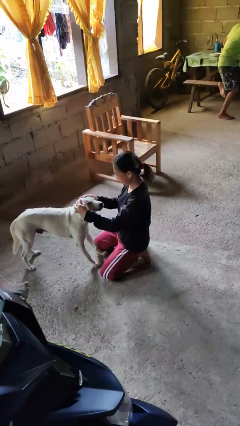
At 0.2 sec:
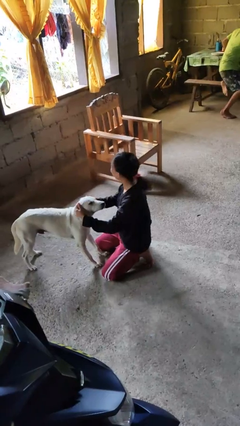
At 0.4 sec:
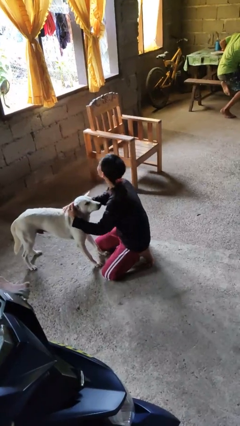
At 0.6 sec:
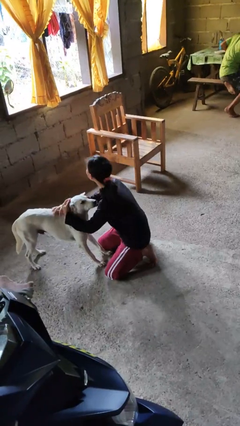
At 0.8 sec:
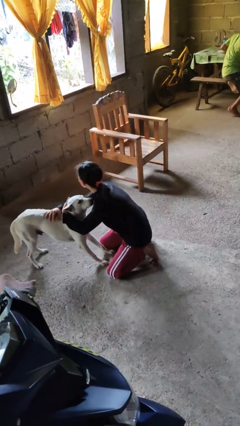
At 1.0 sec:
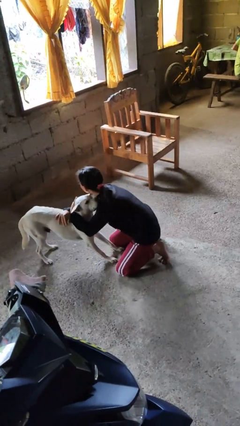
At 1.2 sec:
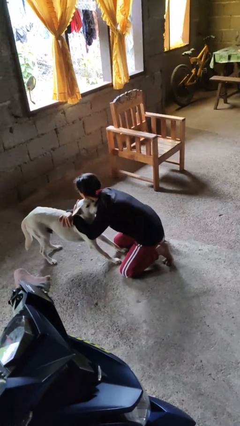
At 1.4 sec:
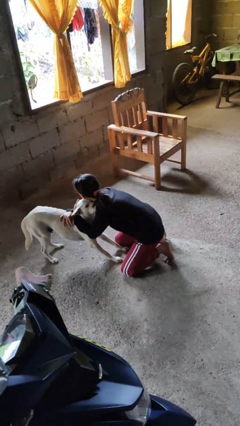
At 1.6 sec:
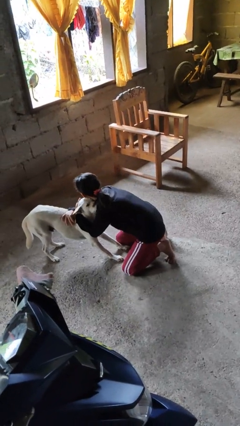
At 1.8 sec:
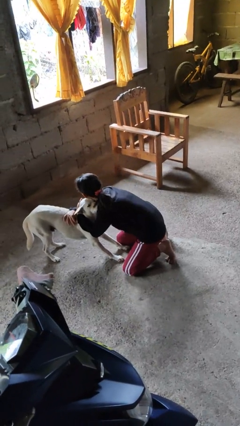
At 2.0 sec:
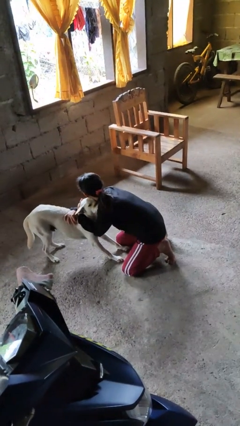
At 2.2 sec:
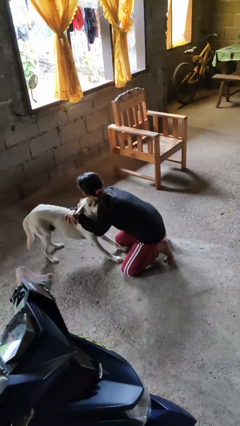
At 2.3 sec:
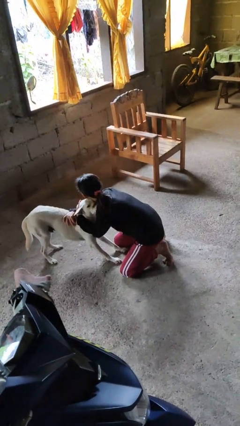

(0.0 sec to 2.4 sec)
person hugs dog

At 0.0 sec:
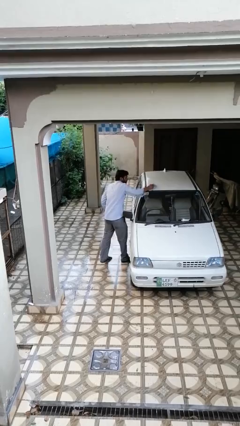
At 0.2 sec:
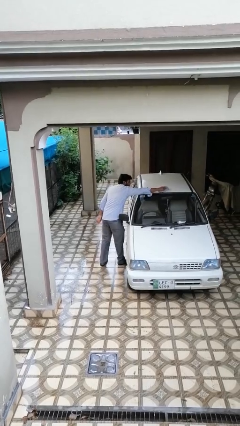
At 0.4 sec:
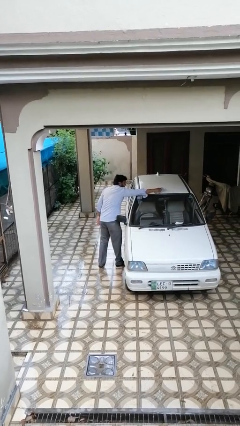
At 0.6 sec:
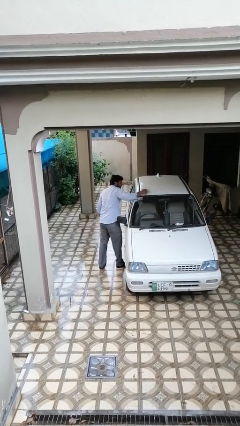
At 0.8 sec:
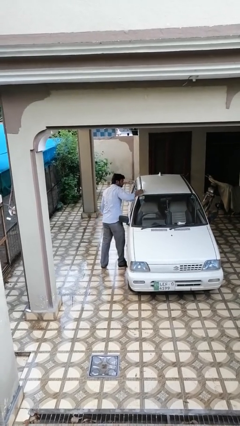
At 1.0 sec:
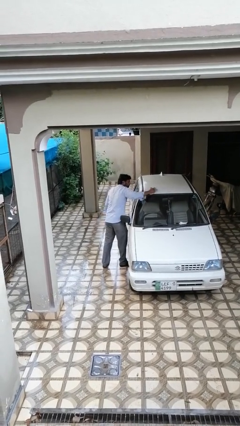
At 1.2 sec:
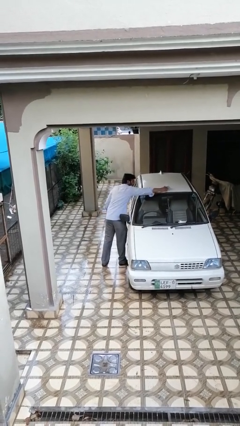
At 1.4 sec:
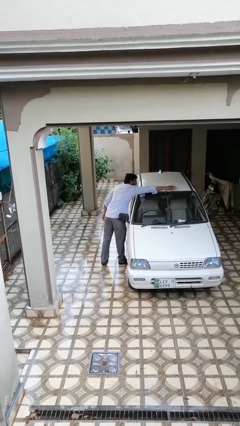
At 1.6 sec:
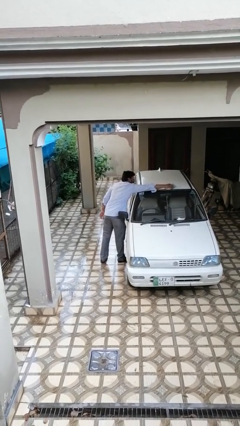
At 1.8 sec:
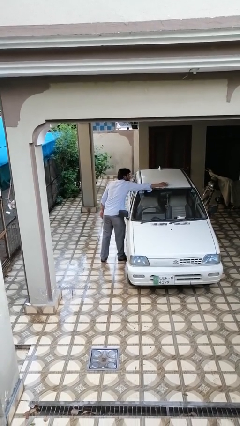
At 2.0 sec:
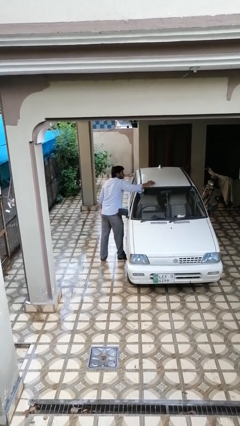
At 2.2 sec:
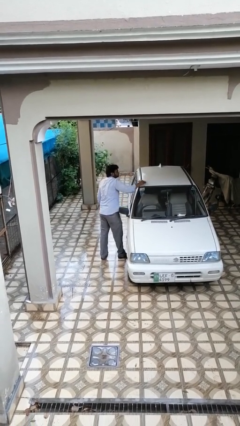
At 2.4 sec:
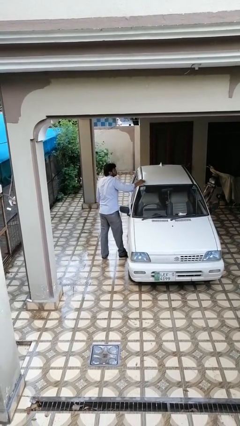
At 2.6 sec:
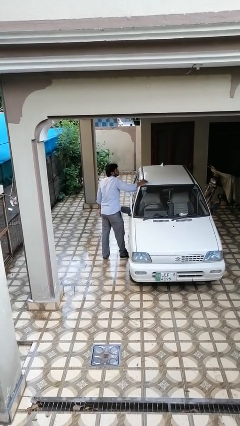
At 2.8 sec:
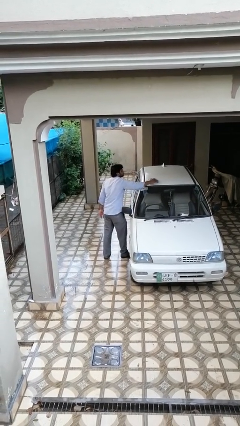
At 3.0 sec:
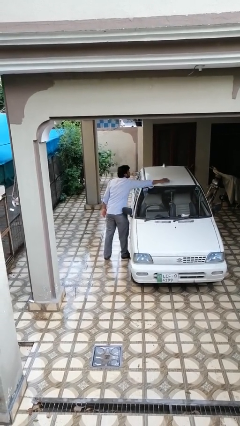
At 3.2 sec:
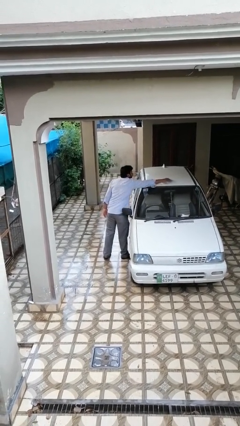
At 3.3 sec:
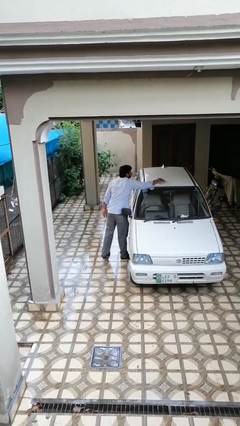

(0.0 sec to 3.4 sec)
person polishes car with rag

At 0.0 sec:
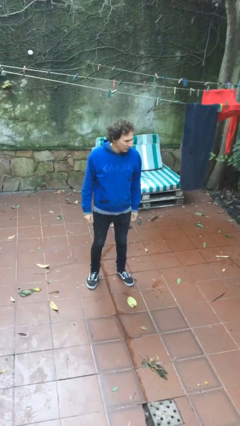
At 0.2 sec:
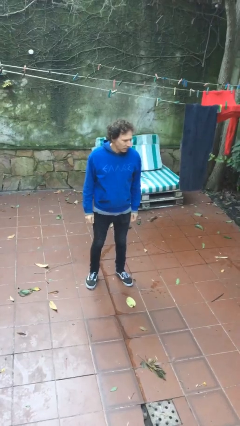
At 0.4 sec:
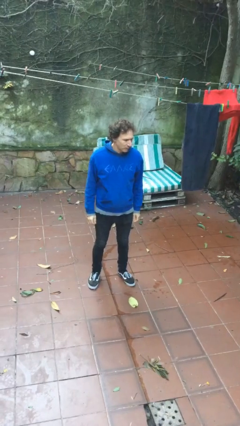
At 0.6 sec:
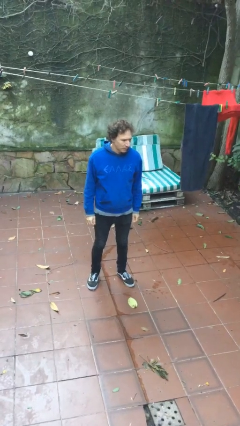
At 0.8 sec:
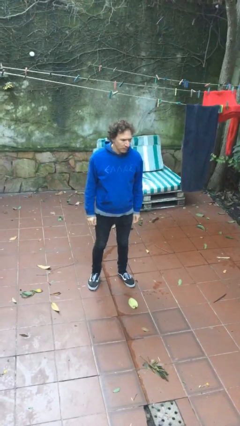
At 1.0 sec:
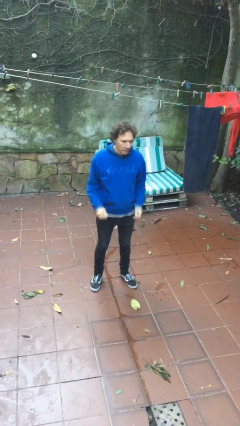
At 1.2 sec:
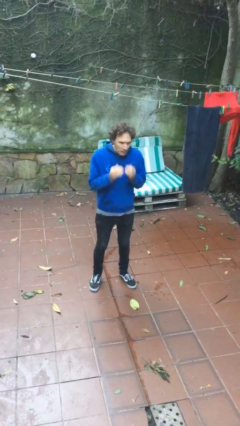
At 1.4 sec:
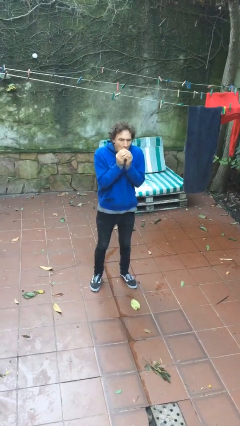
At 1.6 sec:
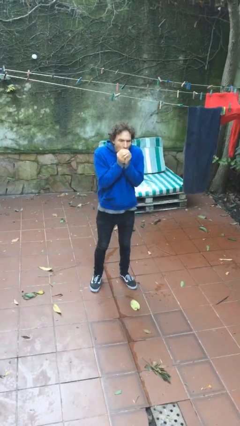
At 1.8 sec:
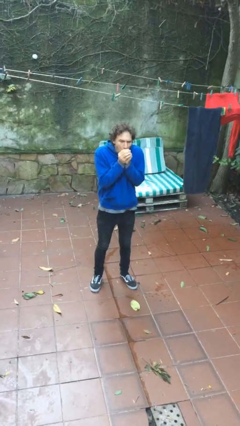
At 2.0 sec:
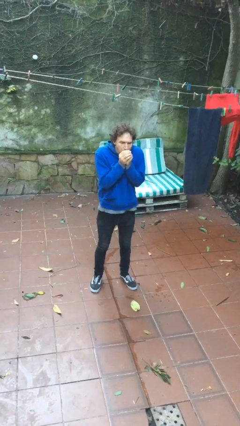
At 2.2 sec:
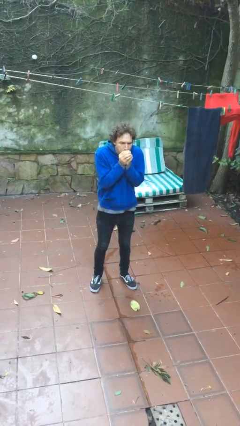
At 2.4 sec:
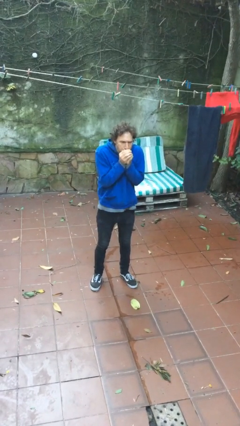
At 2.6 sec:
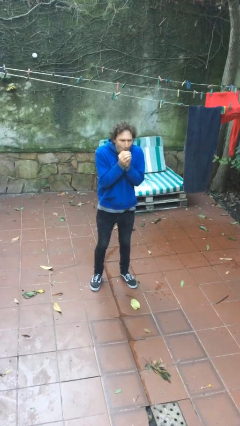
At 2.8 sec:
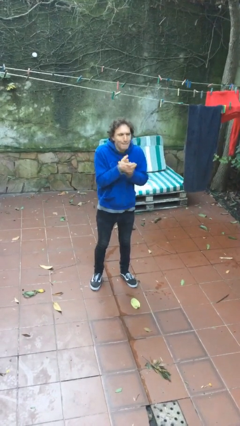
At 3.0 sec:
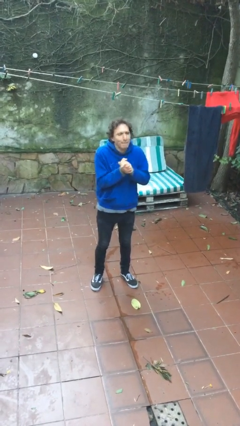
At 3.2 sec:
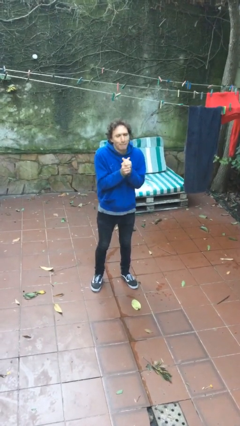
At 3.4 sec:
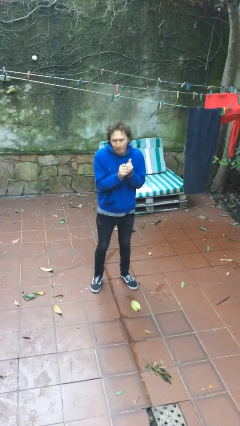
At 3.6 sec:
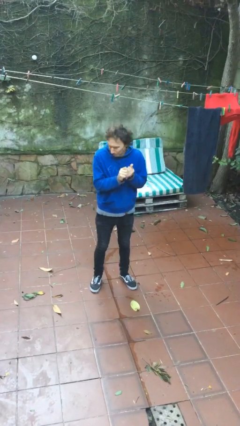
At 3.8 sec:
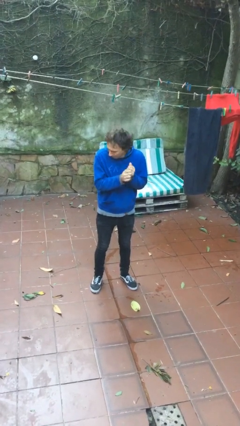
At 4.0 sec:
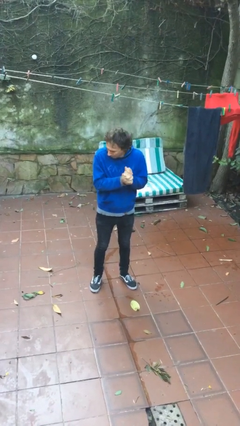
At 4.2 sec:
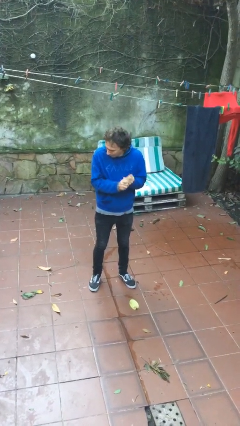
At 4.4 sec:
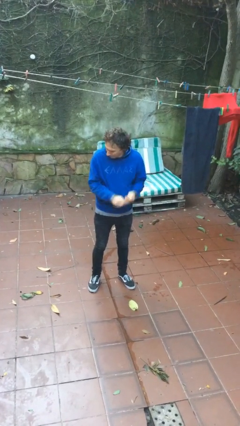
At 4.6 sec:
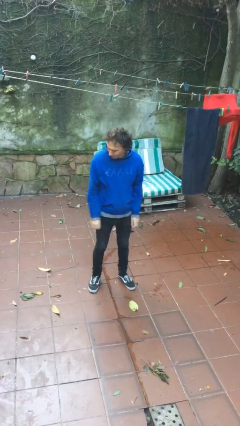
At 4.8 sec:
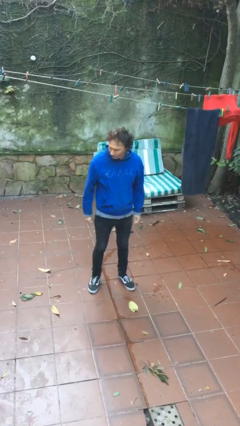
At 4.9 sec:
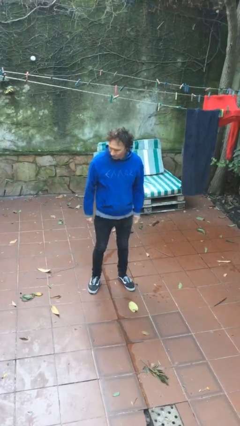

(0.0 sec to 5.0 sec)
person blows into hands

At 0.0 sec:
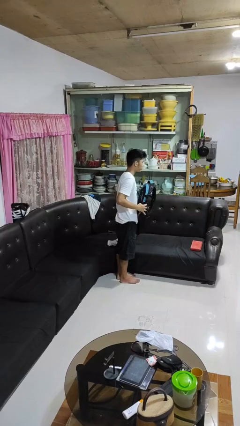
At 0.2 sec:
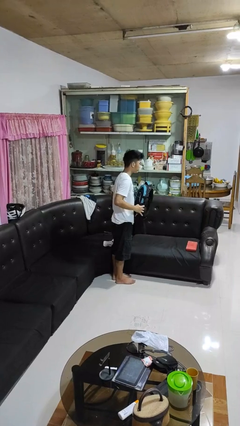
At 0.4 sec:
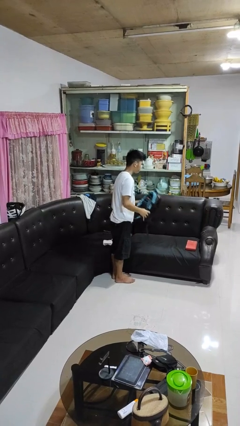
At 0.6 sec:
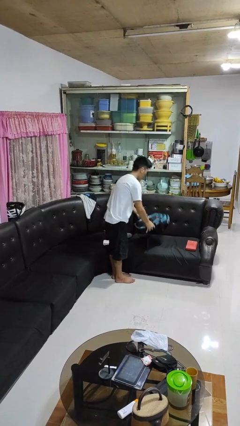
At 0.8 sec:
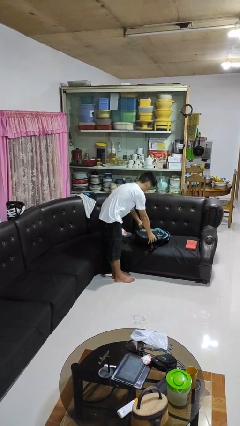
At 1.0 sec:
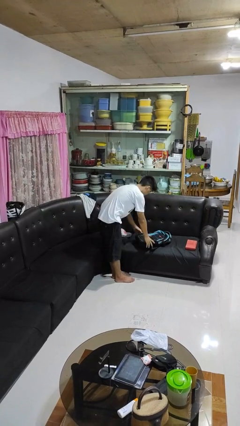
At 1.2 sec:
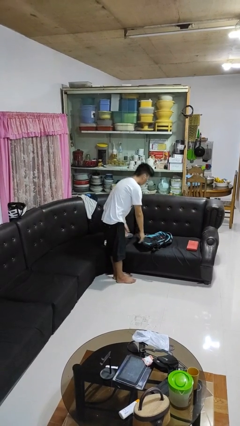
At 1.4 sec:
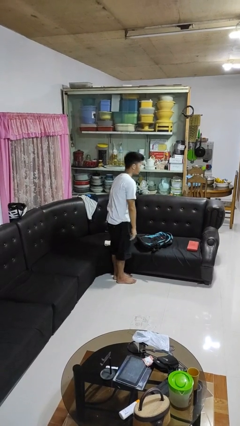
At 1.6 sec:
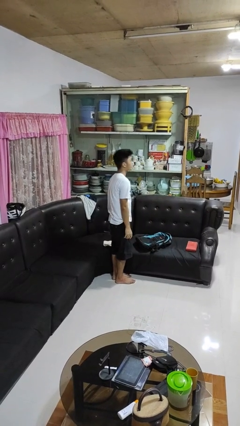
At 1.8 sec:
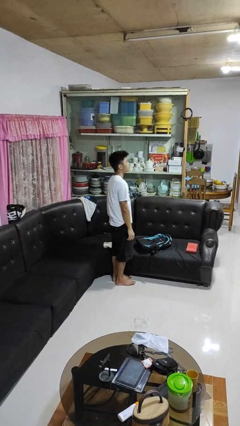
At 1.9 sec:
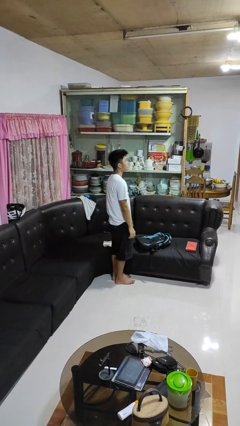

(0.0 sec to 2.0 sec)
person picks up object from couch

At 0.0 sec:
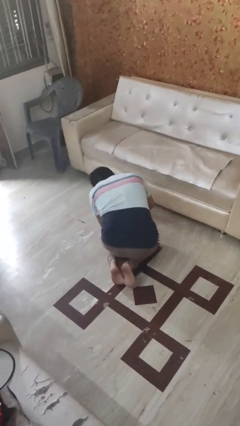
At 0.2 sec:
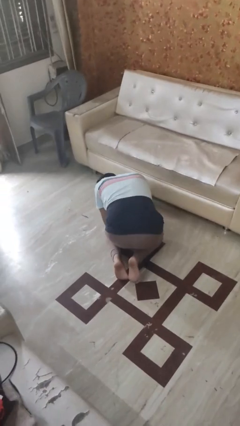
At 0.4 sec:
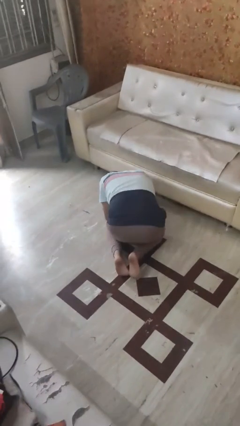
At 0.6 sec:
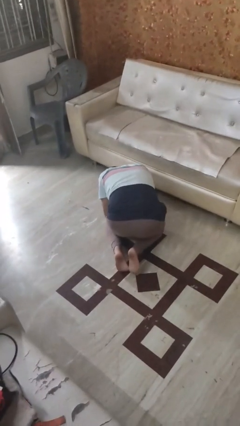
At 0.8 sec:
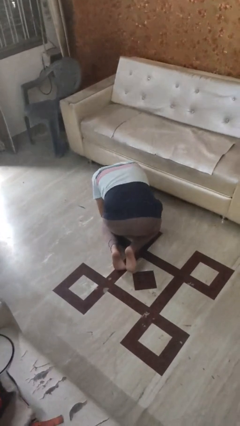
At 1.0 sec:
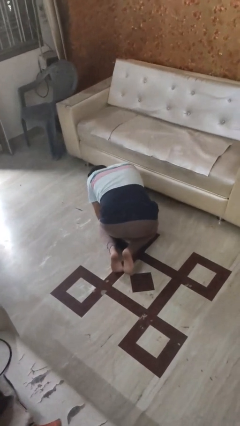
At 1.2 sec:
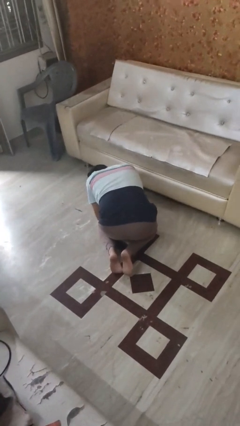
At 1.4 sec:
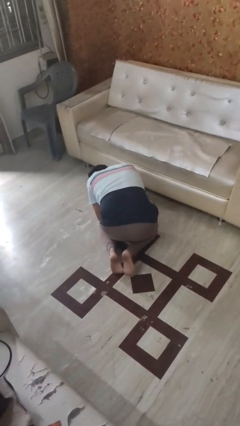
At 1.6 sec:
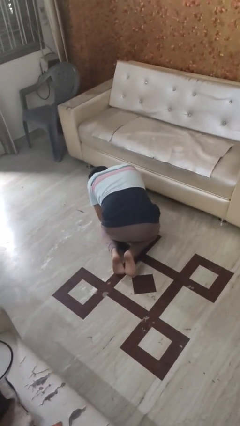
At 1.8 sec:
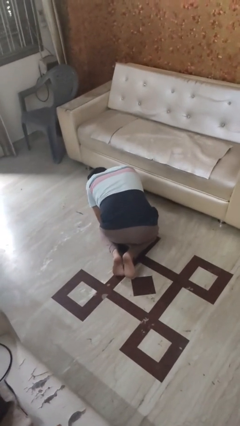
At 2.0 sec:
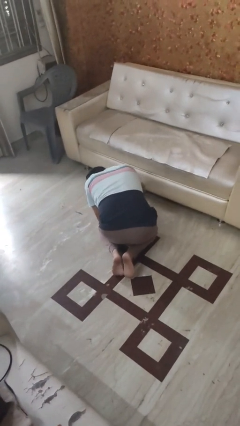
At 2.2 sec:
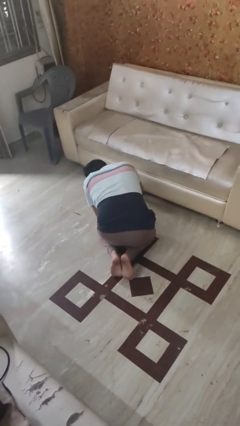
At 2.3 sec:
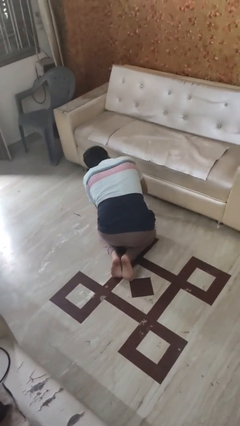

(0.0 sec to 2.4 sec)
person searches under bed

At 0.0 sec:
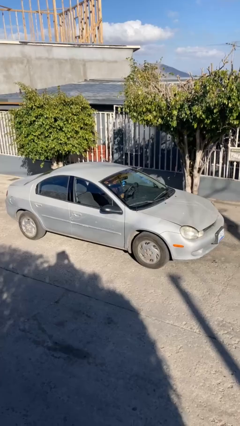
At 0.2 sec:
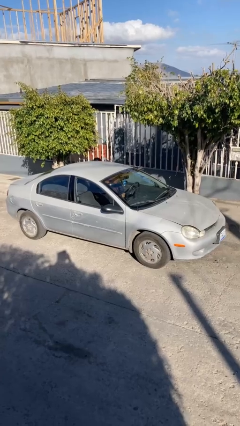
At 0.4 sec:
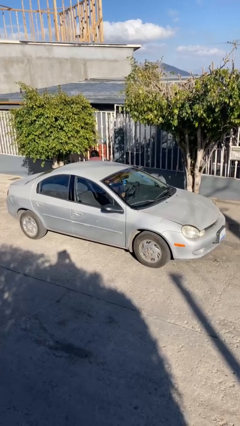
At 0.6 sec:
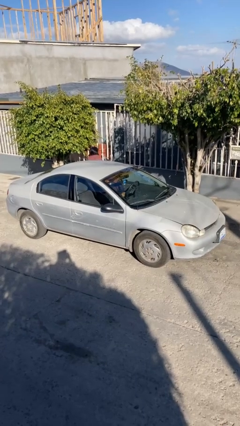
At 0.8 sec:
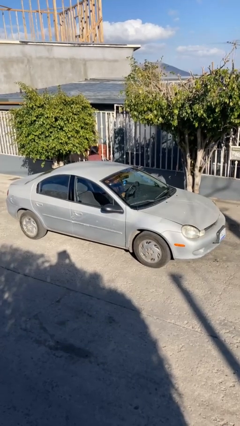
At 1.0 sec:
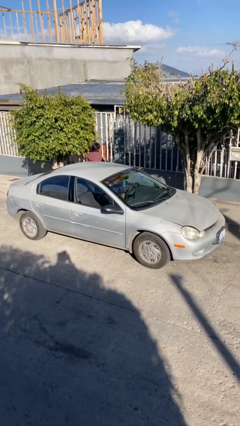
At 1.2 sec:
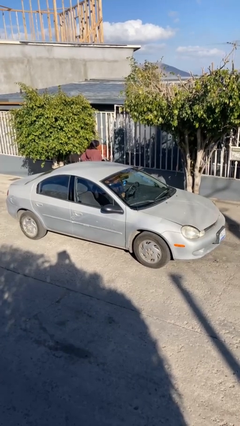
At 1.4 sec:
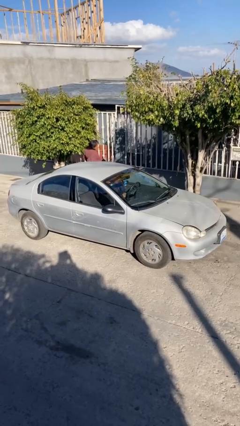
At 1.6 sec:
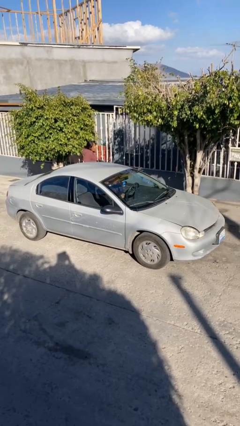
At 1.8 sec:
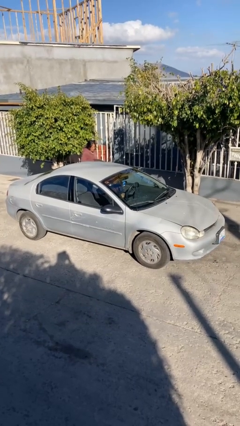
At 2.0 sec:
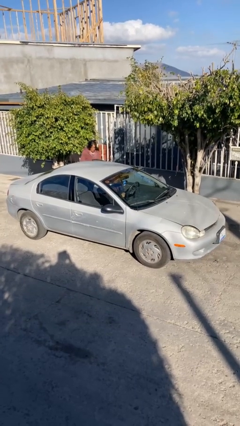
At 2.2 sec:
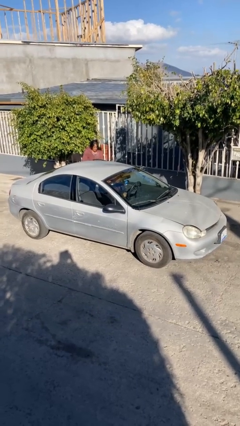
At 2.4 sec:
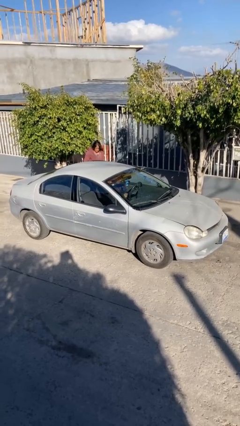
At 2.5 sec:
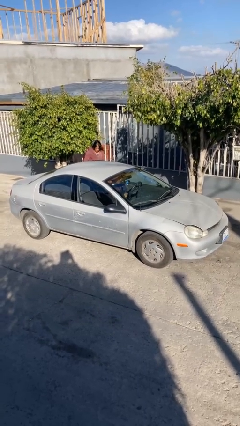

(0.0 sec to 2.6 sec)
car drops off person
